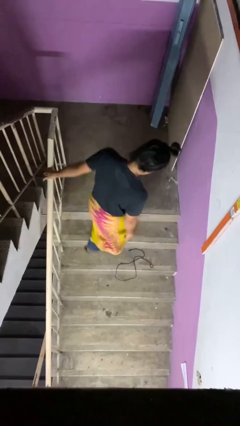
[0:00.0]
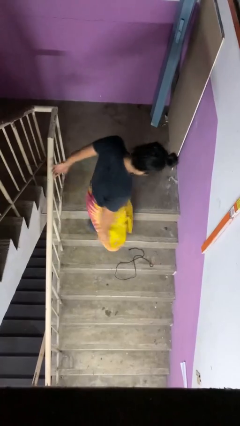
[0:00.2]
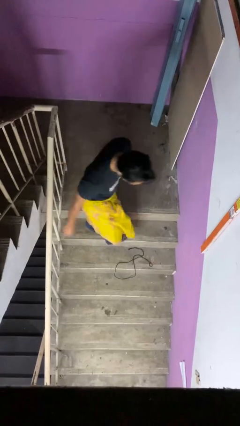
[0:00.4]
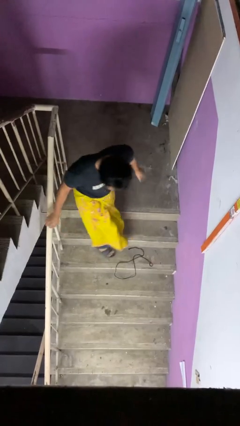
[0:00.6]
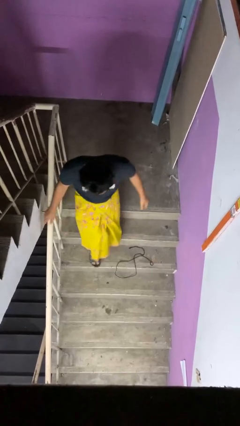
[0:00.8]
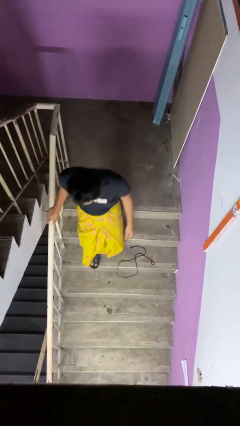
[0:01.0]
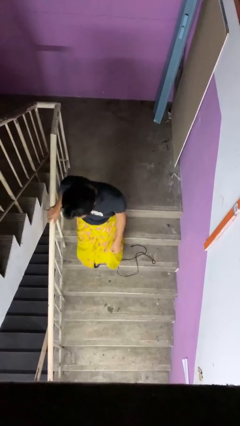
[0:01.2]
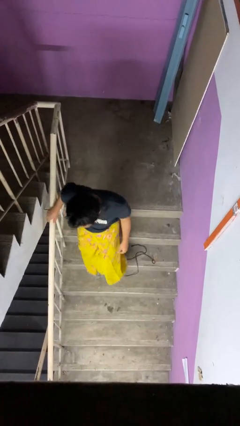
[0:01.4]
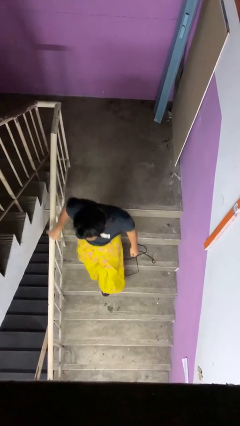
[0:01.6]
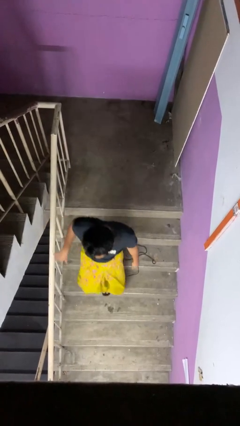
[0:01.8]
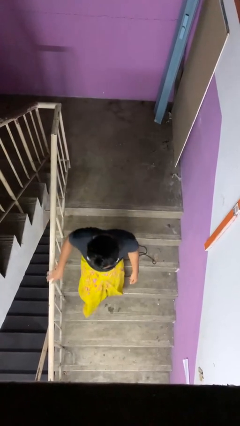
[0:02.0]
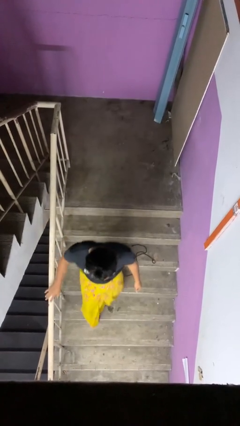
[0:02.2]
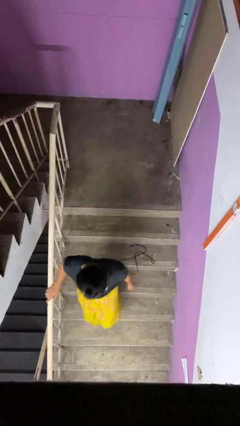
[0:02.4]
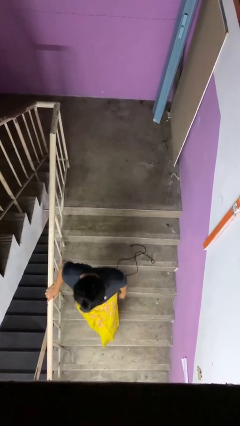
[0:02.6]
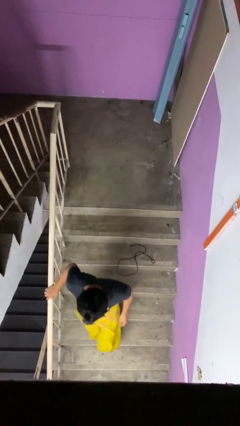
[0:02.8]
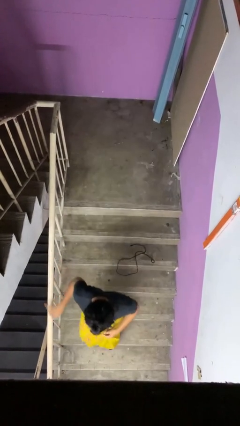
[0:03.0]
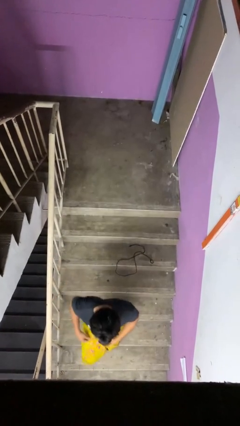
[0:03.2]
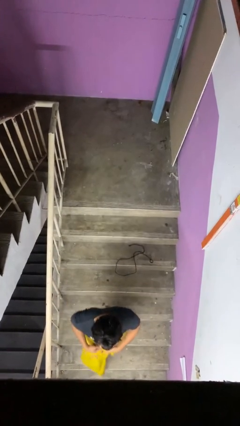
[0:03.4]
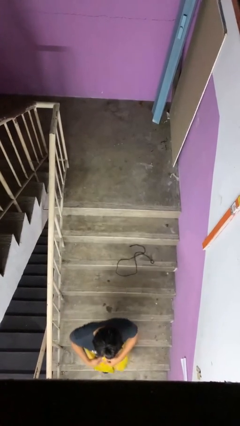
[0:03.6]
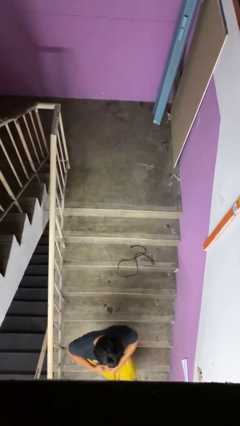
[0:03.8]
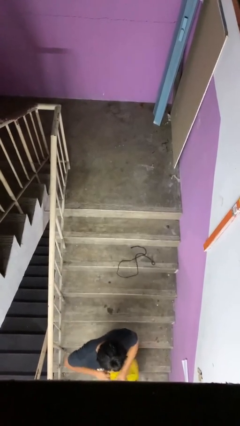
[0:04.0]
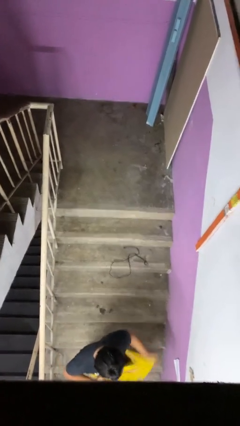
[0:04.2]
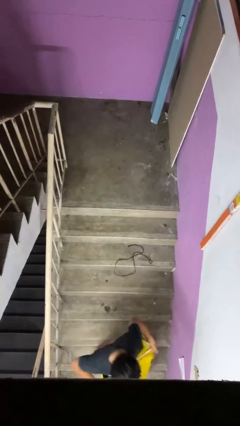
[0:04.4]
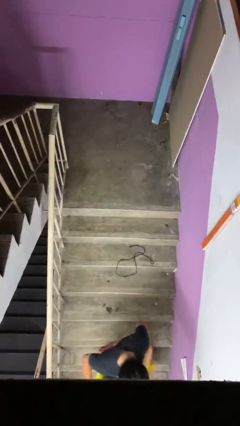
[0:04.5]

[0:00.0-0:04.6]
person climbs down stairs

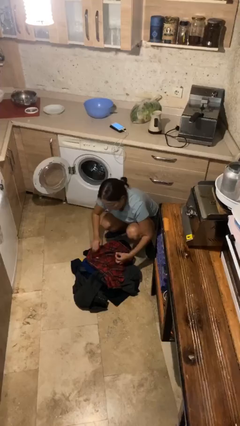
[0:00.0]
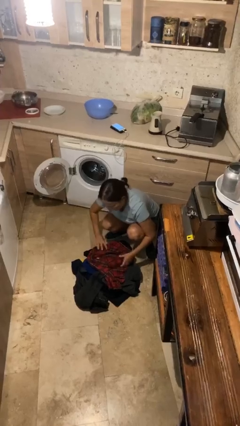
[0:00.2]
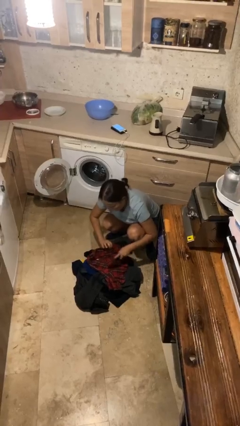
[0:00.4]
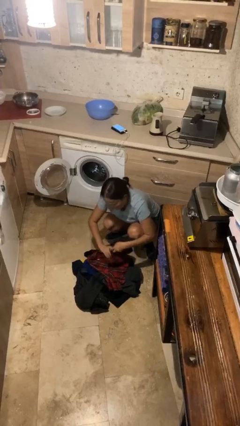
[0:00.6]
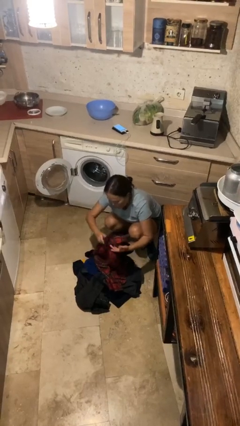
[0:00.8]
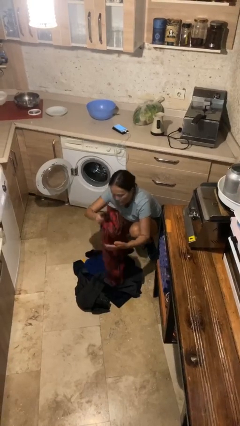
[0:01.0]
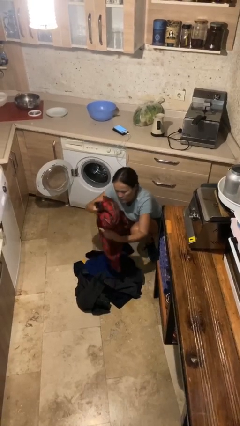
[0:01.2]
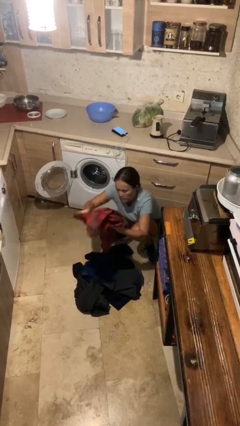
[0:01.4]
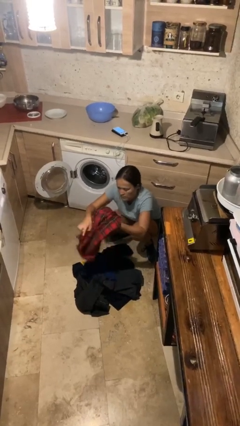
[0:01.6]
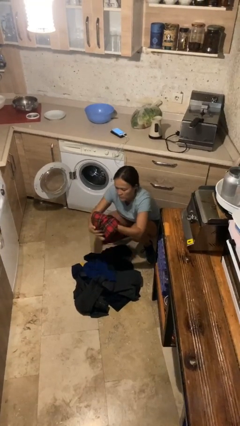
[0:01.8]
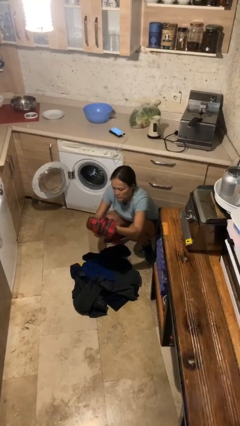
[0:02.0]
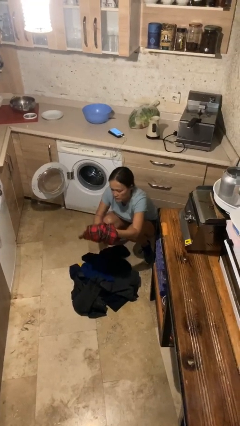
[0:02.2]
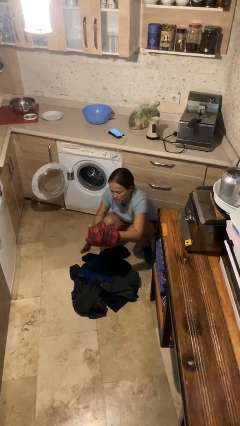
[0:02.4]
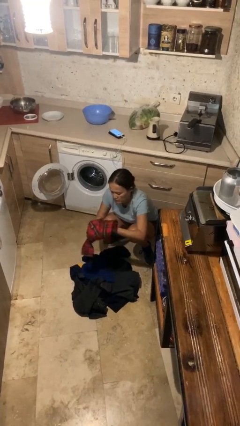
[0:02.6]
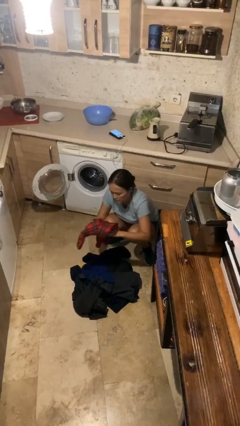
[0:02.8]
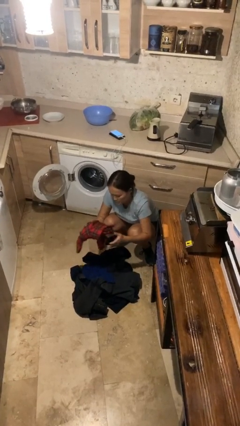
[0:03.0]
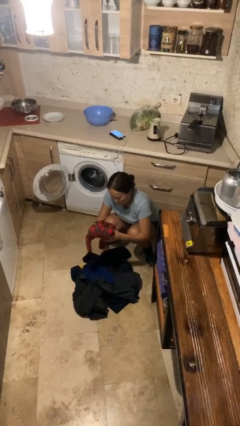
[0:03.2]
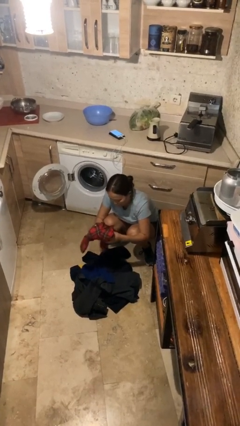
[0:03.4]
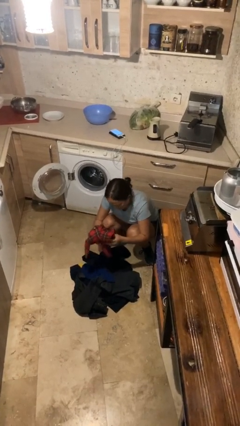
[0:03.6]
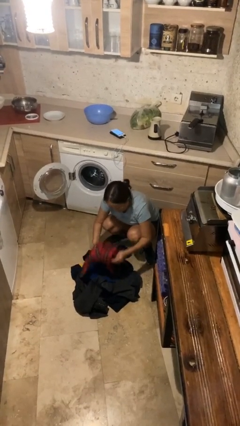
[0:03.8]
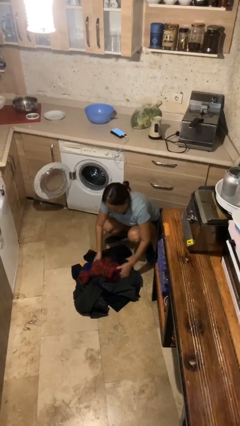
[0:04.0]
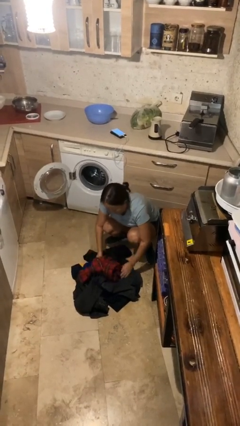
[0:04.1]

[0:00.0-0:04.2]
person folds shirt

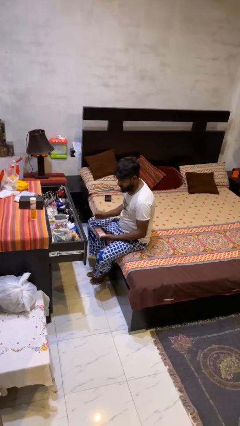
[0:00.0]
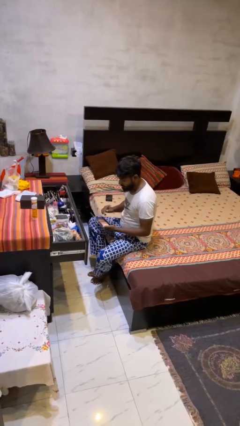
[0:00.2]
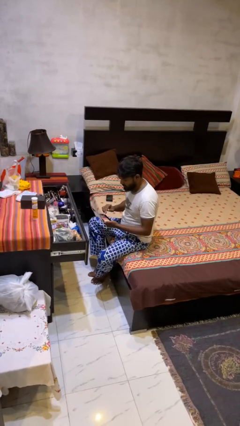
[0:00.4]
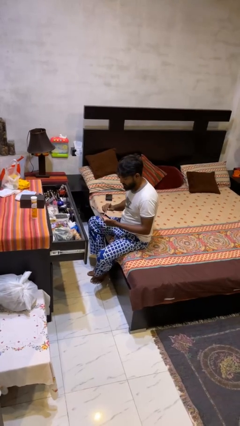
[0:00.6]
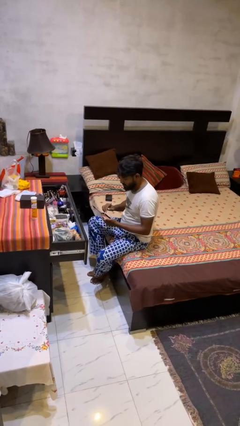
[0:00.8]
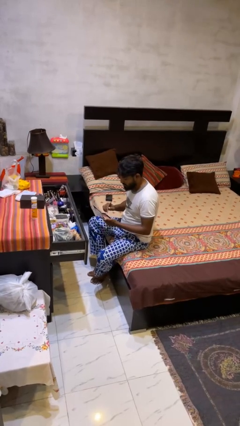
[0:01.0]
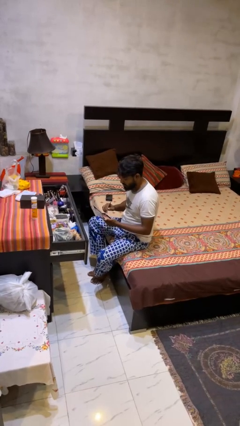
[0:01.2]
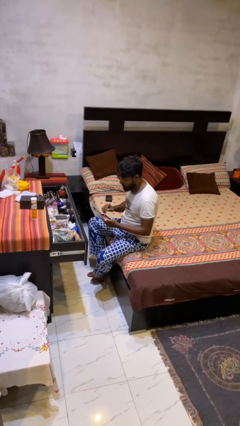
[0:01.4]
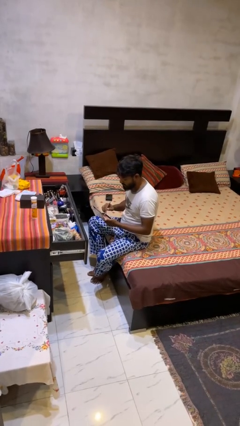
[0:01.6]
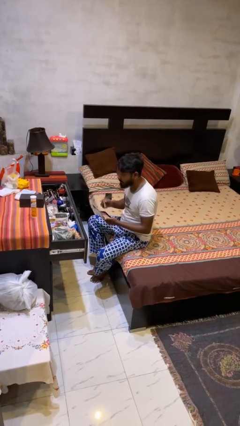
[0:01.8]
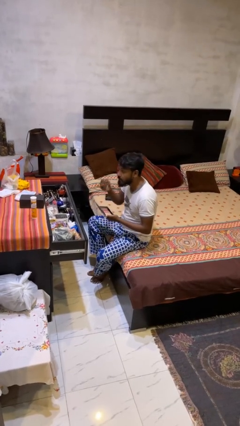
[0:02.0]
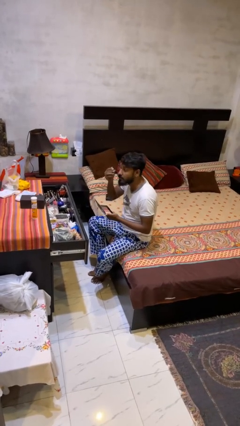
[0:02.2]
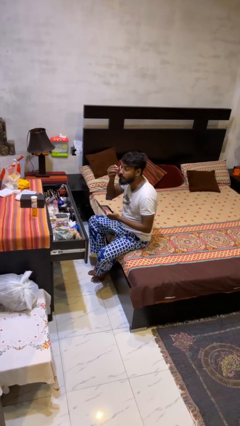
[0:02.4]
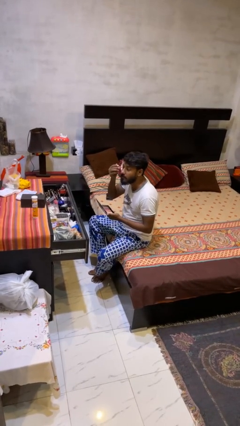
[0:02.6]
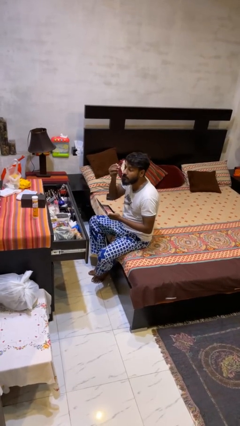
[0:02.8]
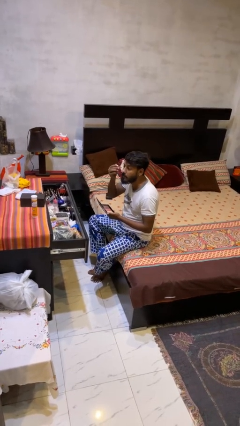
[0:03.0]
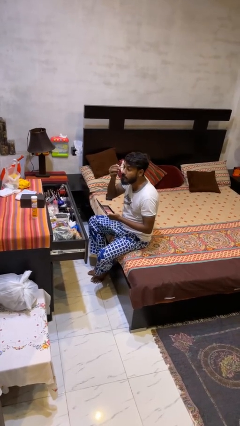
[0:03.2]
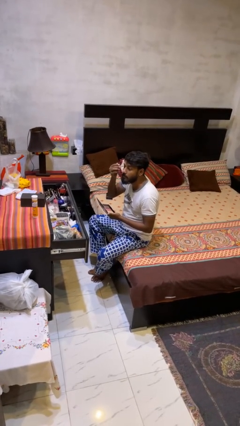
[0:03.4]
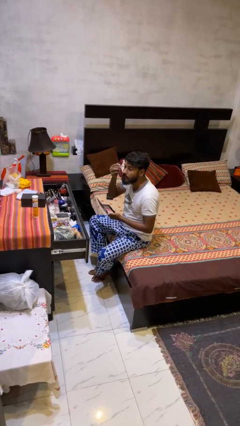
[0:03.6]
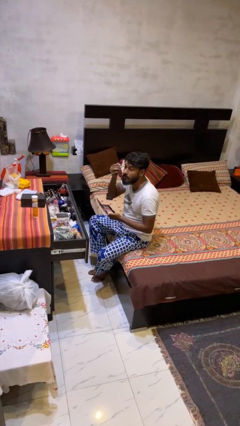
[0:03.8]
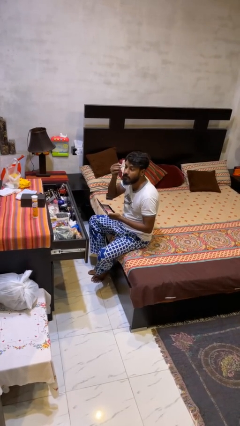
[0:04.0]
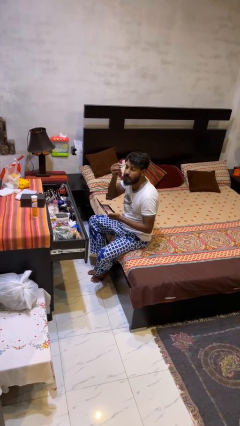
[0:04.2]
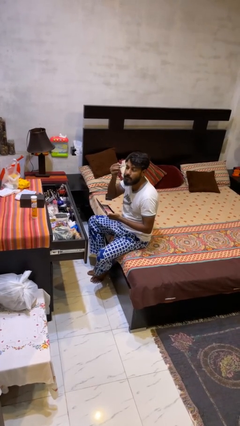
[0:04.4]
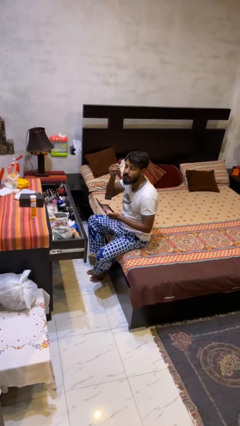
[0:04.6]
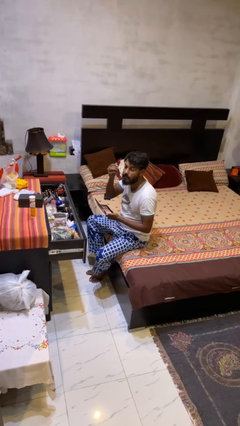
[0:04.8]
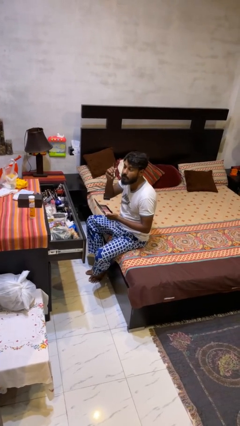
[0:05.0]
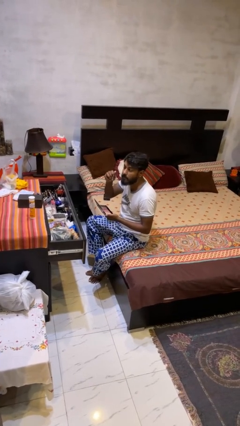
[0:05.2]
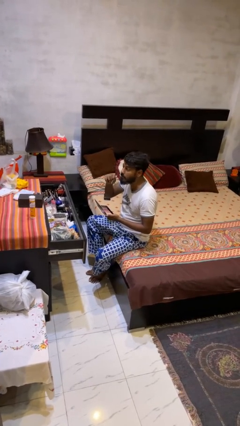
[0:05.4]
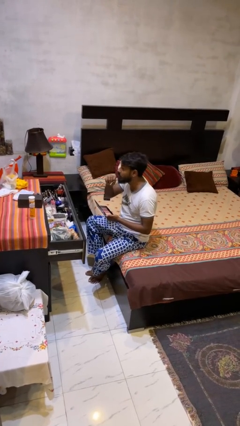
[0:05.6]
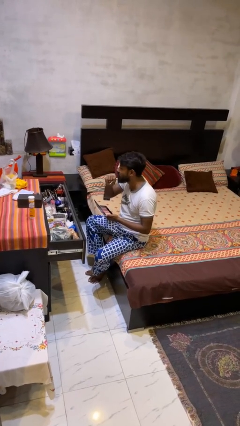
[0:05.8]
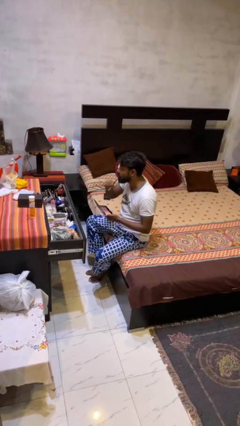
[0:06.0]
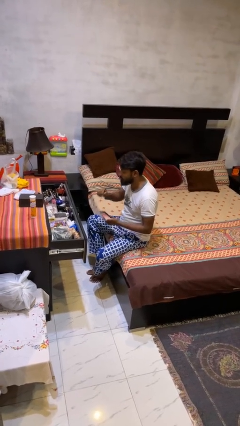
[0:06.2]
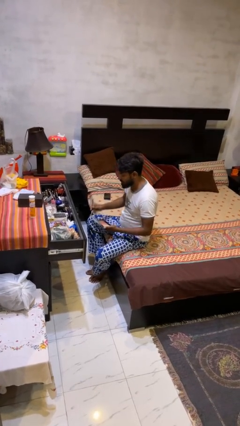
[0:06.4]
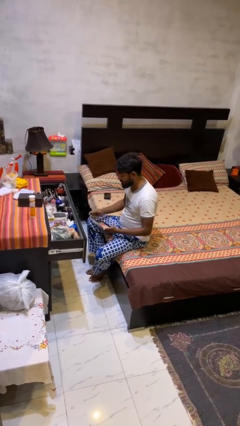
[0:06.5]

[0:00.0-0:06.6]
person applies eye makeup

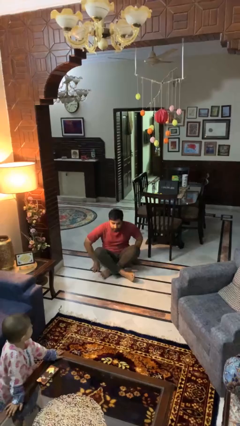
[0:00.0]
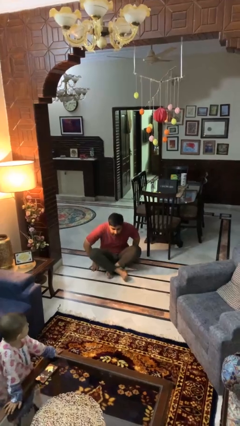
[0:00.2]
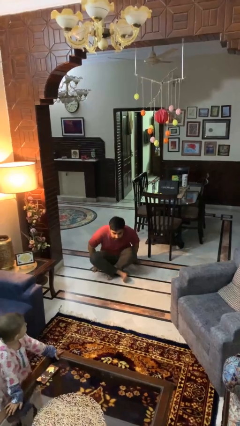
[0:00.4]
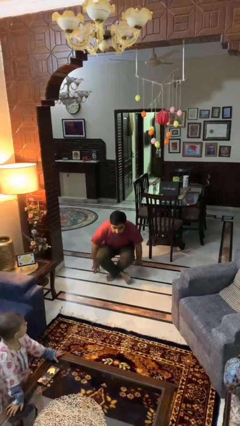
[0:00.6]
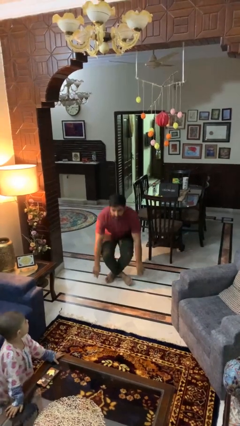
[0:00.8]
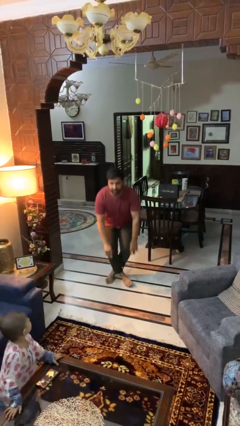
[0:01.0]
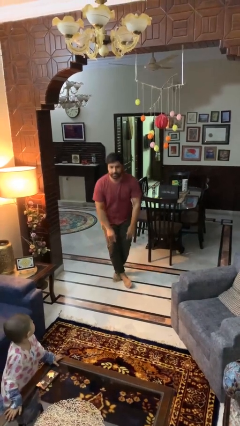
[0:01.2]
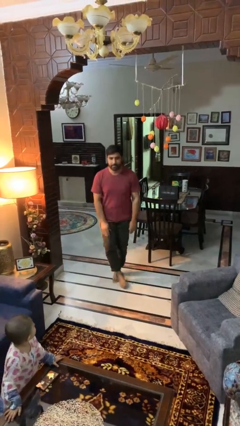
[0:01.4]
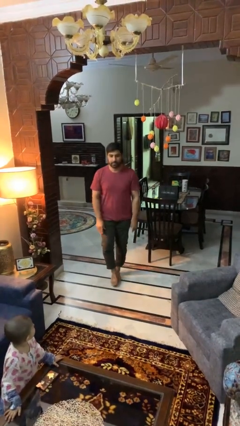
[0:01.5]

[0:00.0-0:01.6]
person stands up from floor

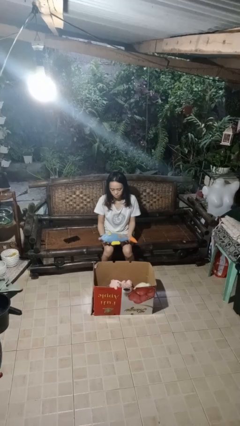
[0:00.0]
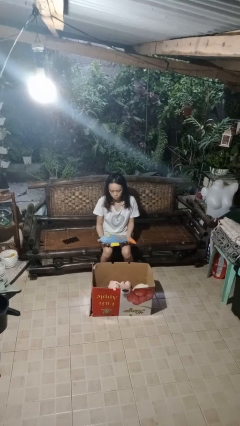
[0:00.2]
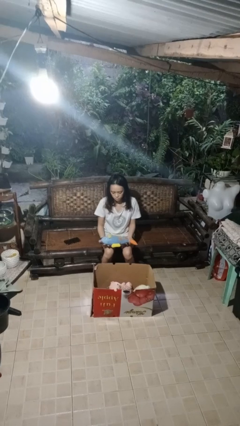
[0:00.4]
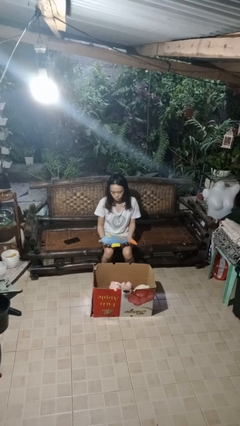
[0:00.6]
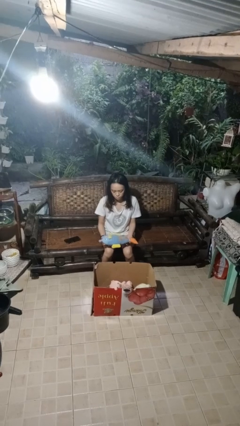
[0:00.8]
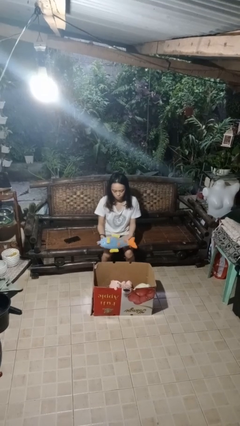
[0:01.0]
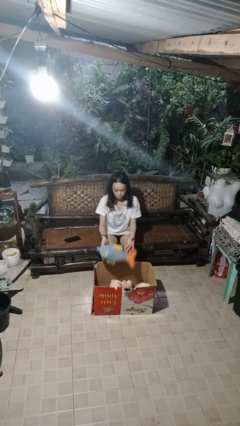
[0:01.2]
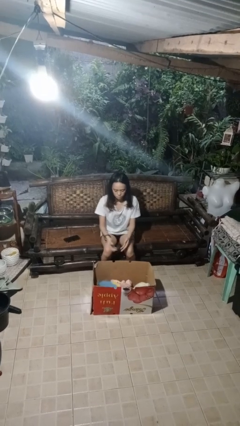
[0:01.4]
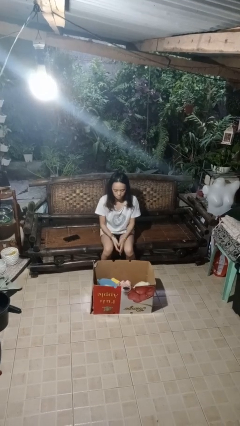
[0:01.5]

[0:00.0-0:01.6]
person puts object into box
